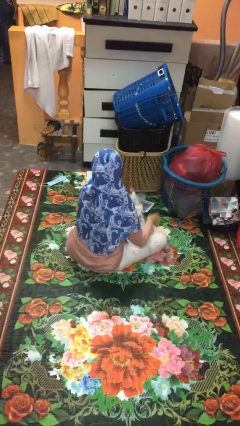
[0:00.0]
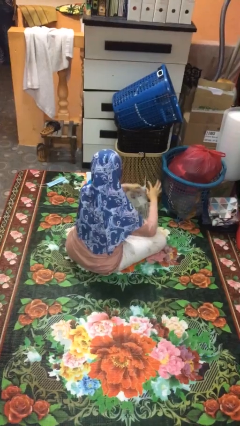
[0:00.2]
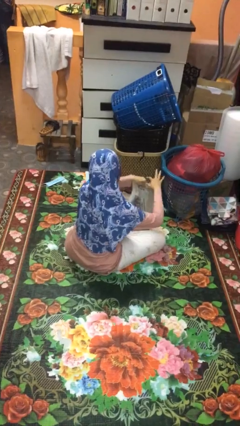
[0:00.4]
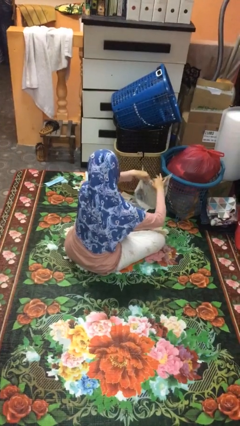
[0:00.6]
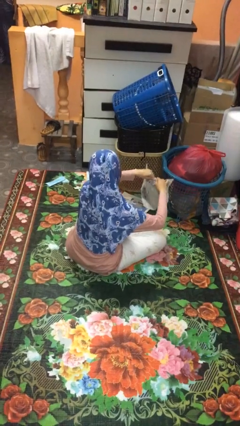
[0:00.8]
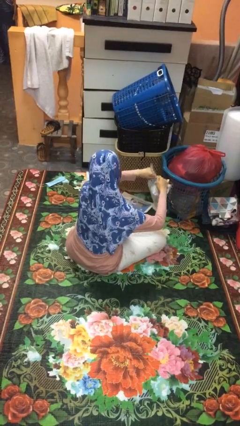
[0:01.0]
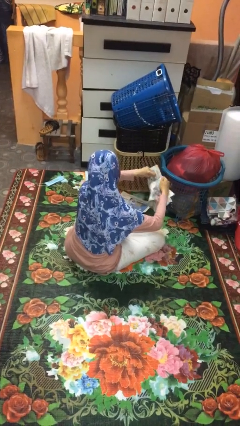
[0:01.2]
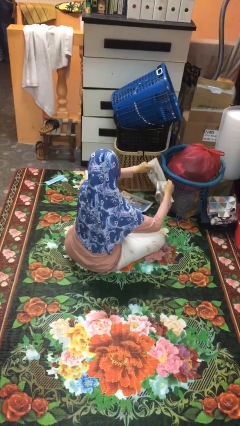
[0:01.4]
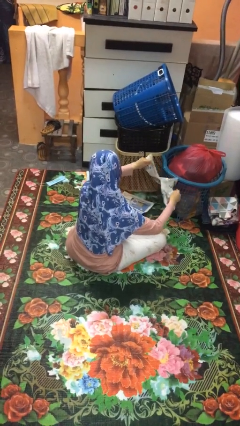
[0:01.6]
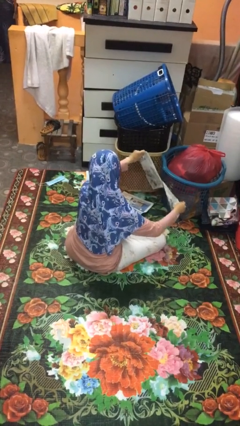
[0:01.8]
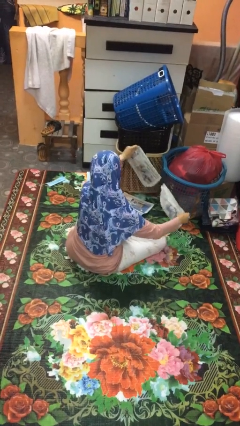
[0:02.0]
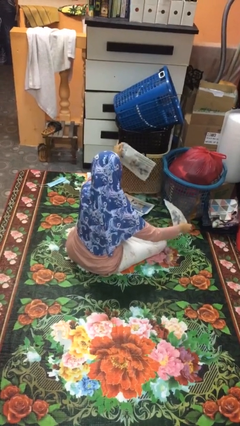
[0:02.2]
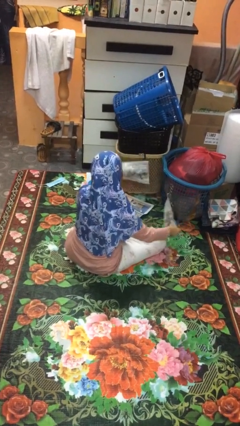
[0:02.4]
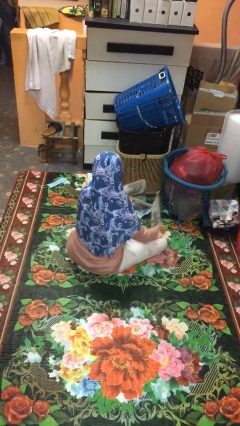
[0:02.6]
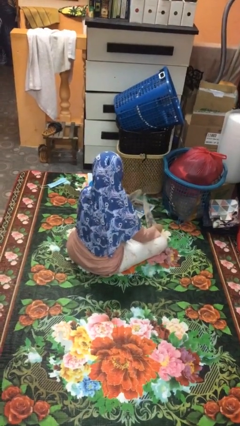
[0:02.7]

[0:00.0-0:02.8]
person tears paper

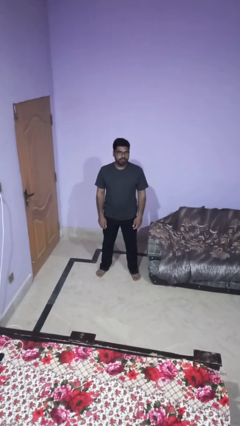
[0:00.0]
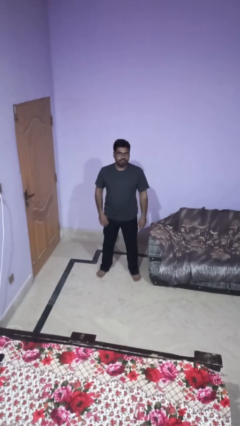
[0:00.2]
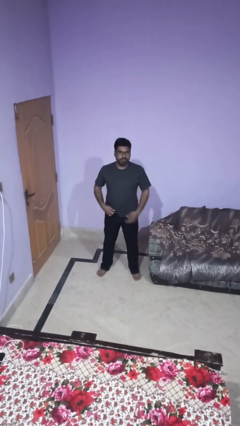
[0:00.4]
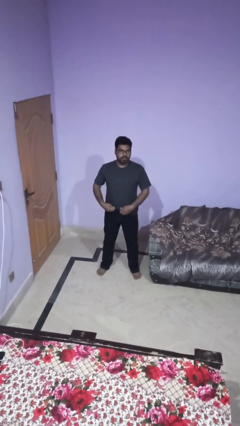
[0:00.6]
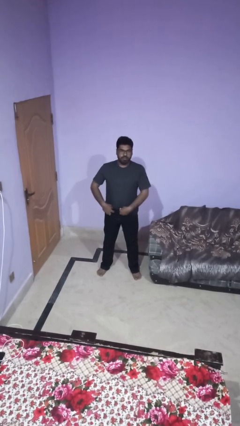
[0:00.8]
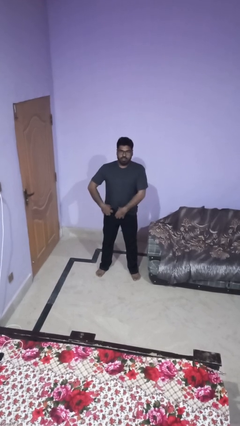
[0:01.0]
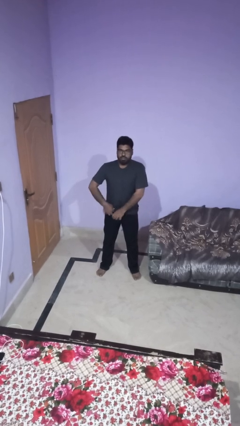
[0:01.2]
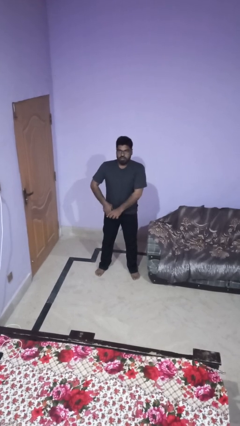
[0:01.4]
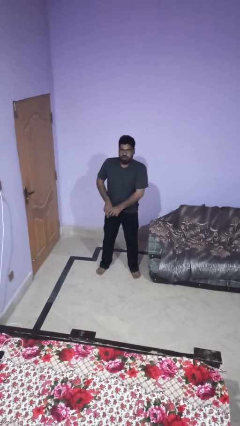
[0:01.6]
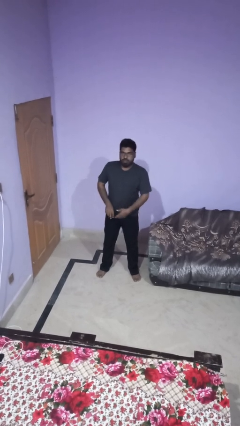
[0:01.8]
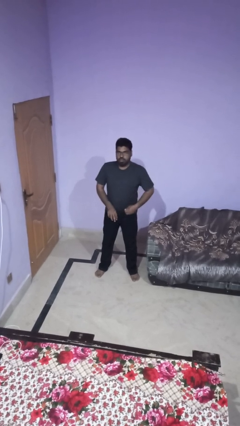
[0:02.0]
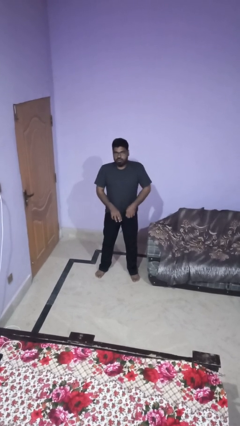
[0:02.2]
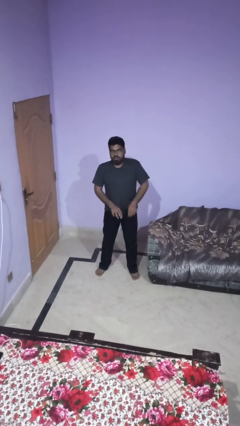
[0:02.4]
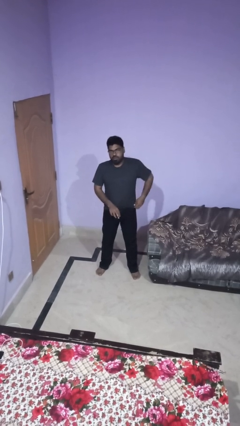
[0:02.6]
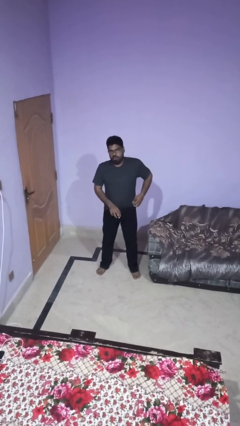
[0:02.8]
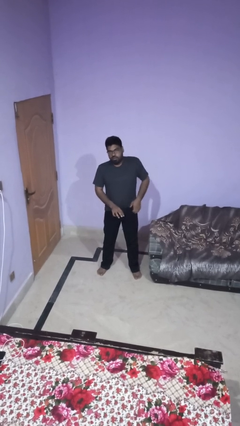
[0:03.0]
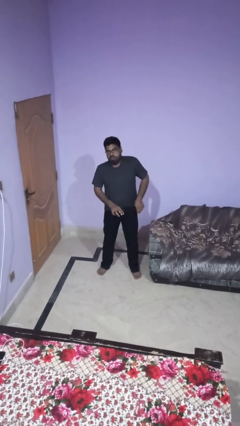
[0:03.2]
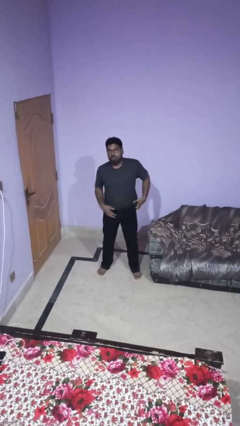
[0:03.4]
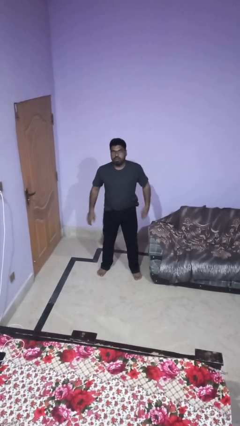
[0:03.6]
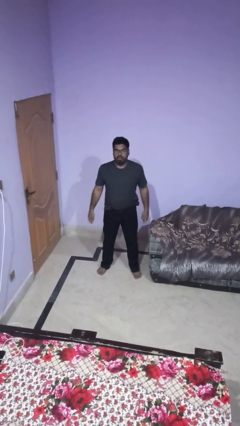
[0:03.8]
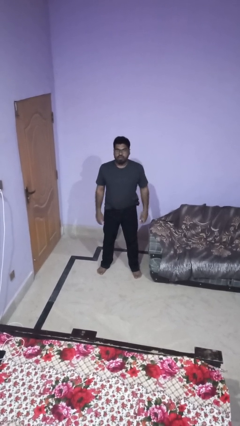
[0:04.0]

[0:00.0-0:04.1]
person tucks in shirt

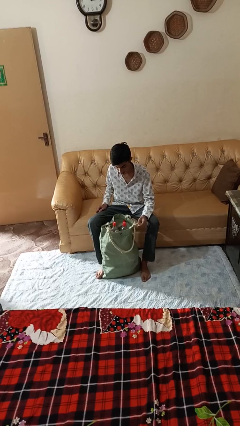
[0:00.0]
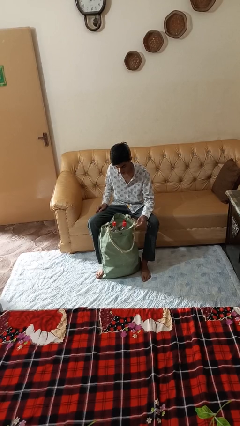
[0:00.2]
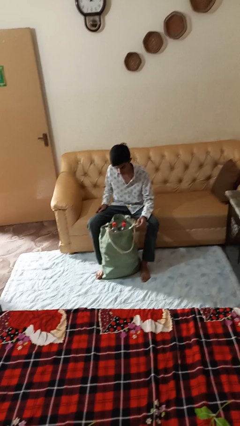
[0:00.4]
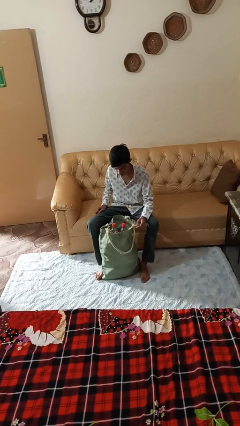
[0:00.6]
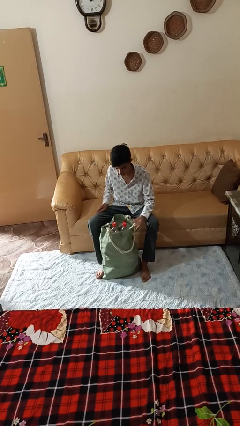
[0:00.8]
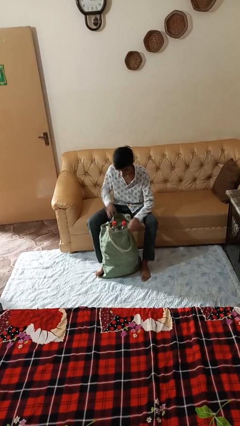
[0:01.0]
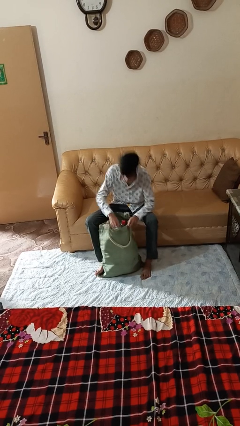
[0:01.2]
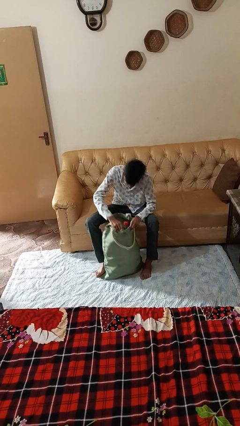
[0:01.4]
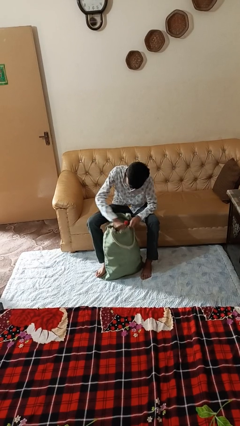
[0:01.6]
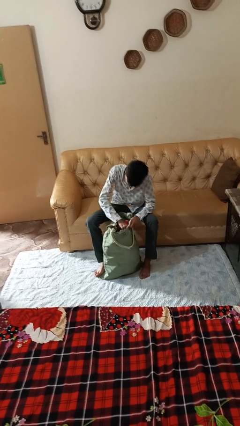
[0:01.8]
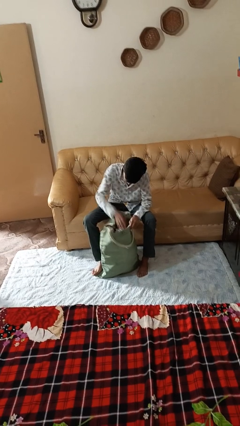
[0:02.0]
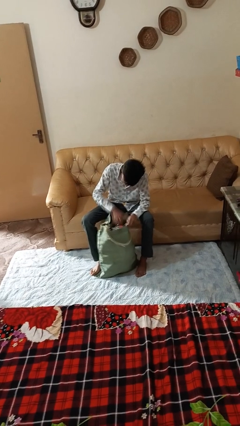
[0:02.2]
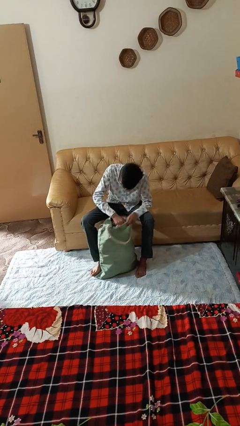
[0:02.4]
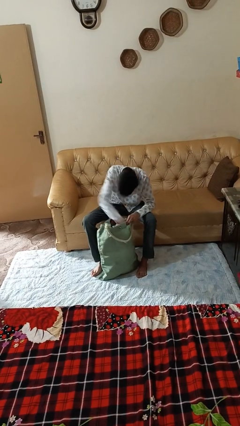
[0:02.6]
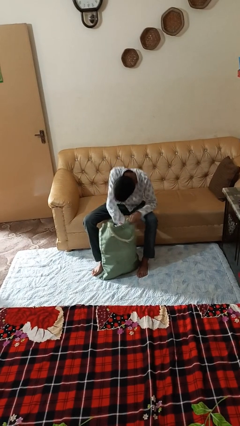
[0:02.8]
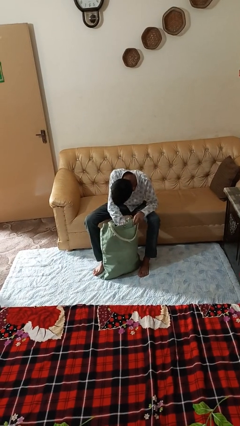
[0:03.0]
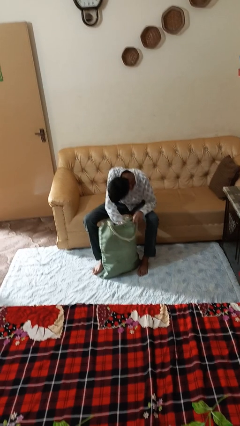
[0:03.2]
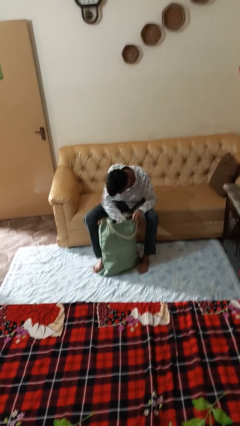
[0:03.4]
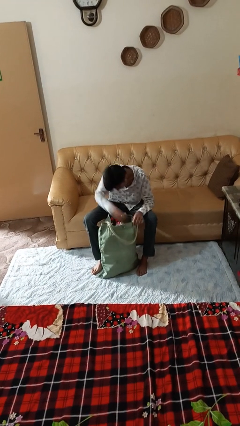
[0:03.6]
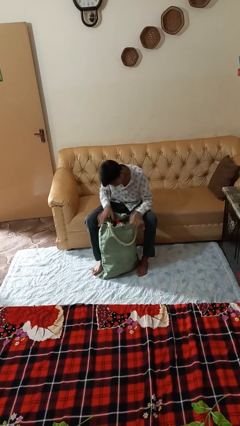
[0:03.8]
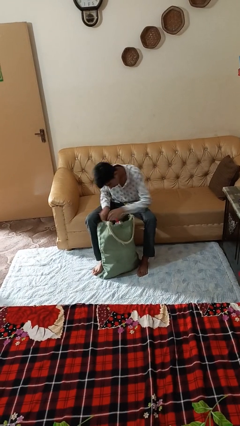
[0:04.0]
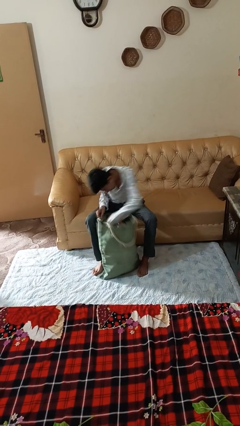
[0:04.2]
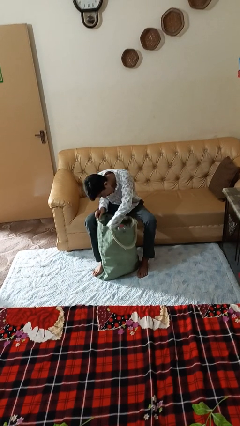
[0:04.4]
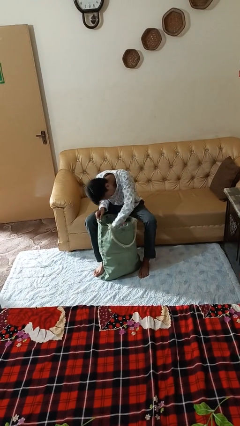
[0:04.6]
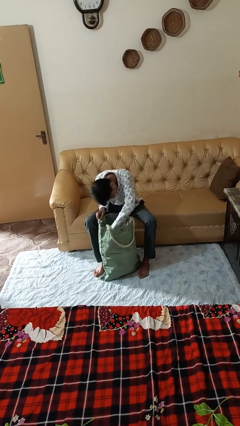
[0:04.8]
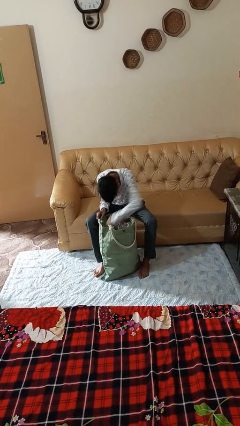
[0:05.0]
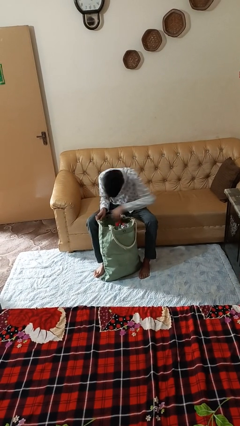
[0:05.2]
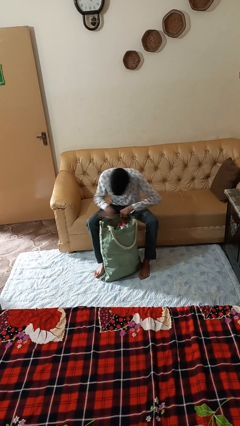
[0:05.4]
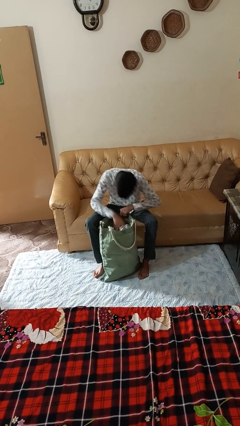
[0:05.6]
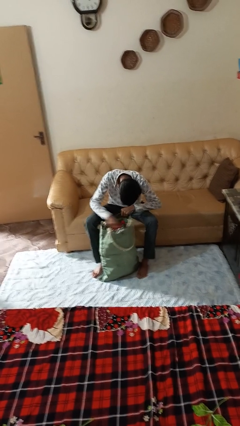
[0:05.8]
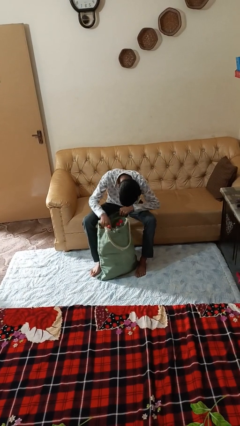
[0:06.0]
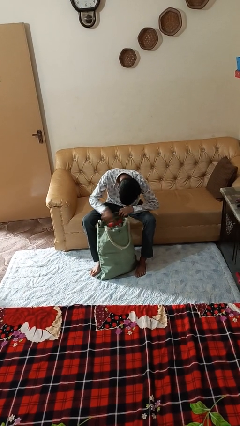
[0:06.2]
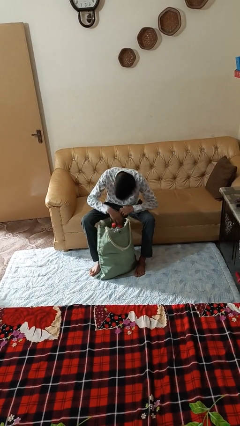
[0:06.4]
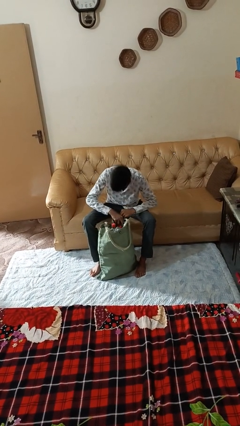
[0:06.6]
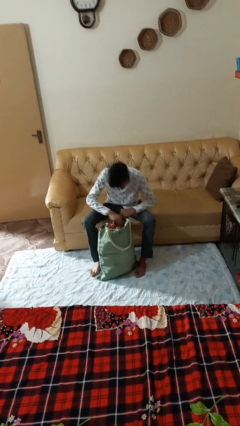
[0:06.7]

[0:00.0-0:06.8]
person searches in bag

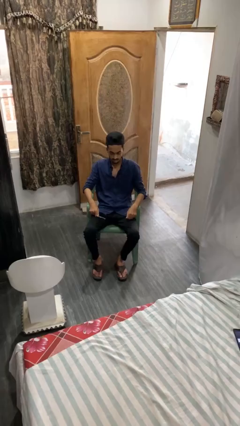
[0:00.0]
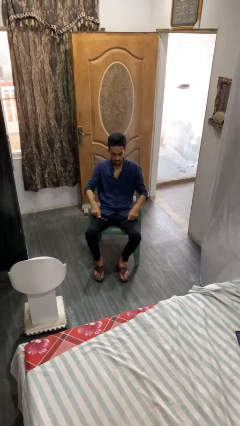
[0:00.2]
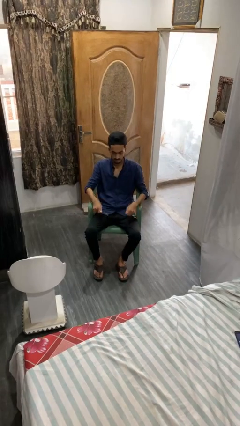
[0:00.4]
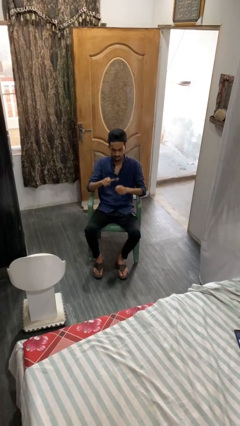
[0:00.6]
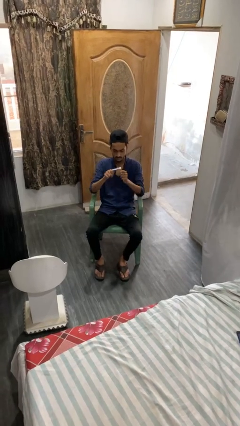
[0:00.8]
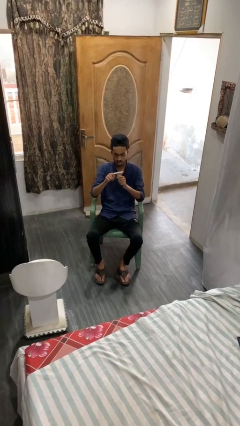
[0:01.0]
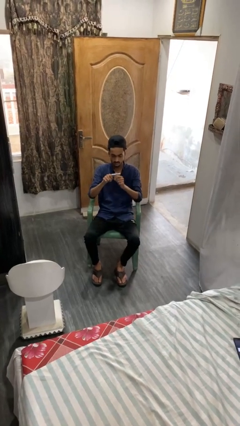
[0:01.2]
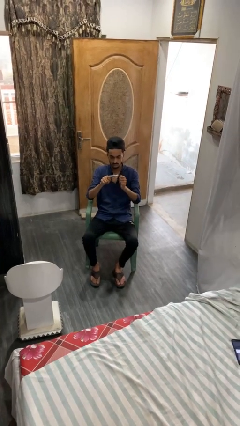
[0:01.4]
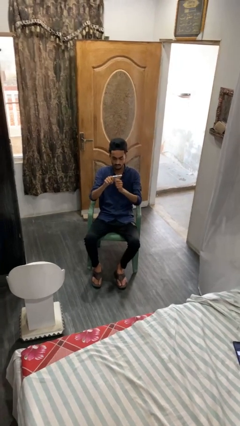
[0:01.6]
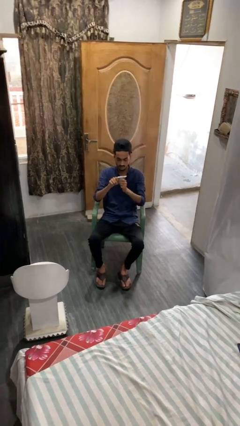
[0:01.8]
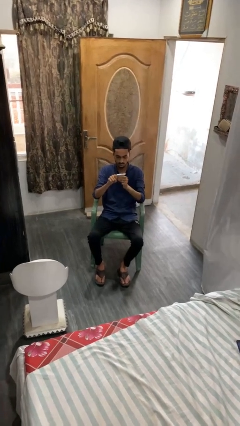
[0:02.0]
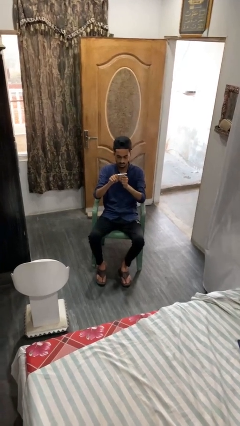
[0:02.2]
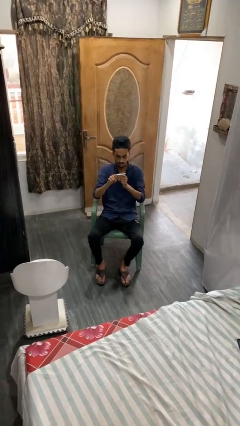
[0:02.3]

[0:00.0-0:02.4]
person files fingernails

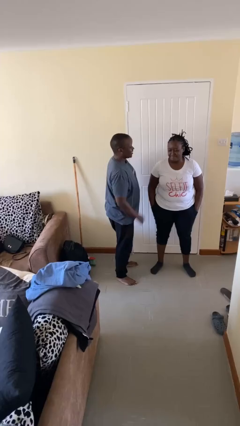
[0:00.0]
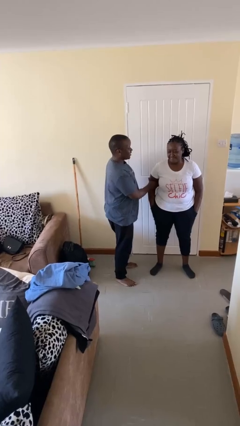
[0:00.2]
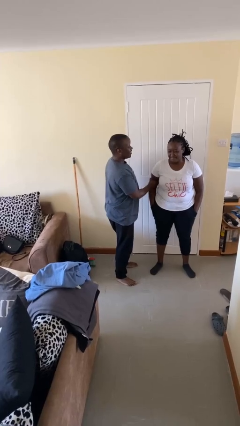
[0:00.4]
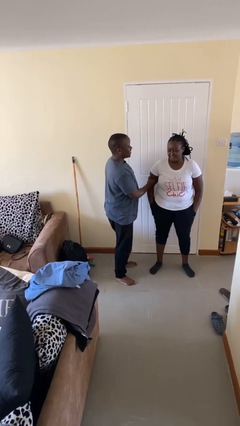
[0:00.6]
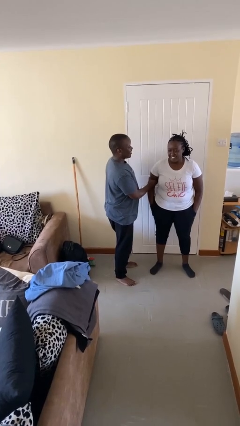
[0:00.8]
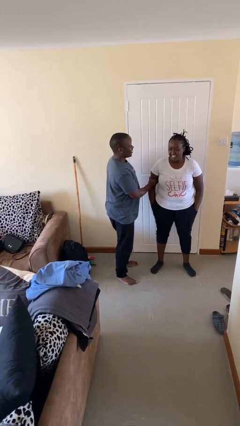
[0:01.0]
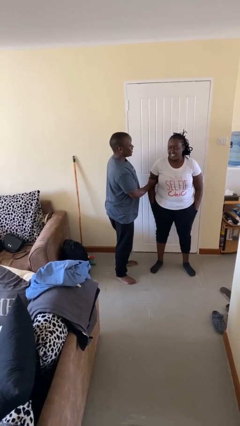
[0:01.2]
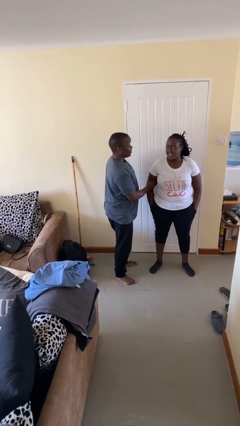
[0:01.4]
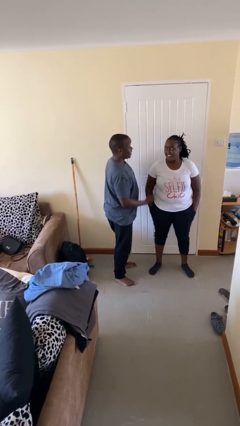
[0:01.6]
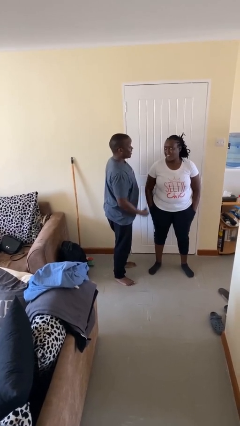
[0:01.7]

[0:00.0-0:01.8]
person grabs person by bicep
